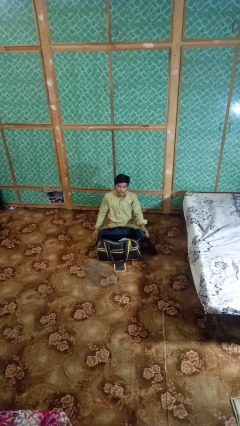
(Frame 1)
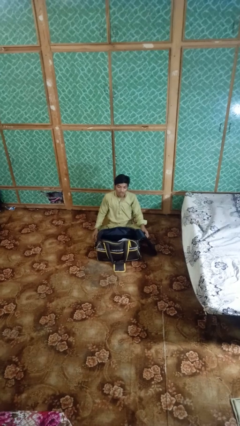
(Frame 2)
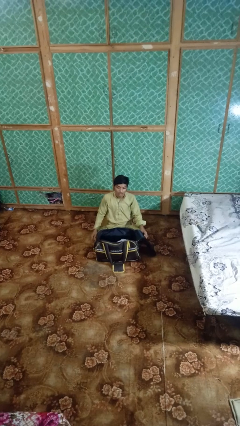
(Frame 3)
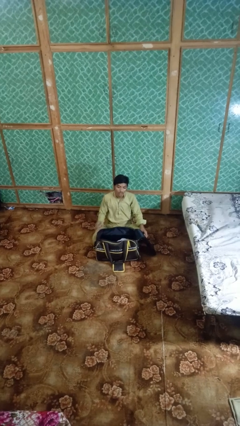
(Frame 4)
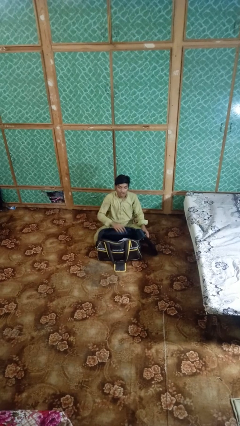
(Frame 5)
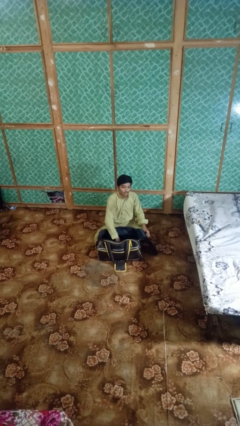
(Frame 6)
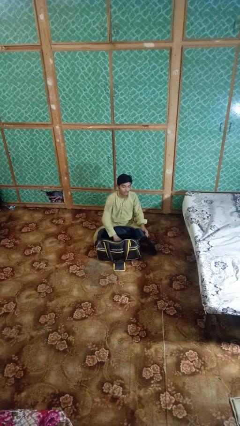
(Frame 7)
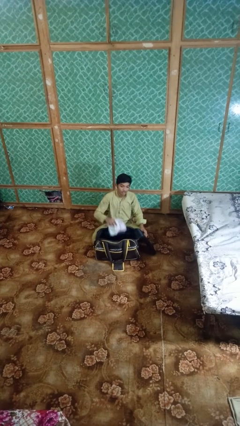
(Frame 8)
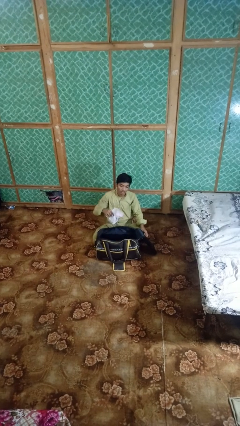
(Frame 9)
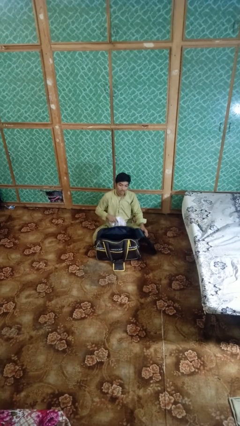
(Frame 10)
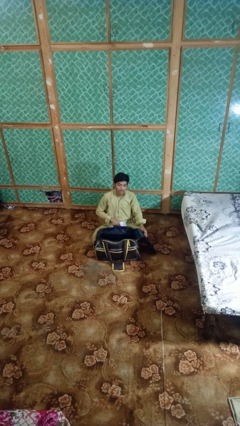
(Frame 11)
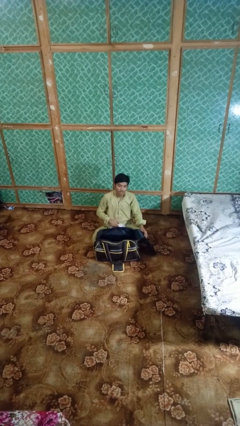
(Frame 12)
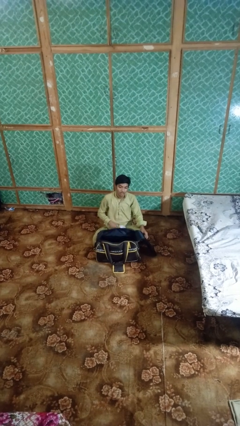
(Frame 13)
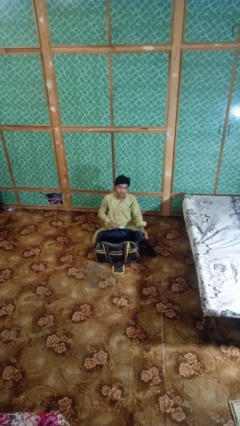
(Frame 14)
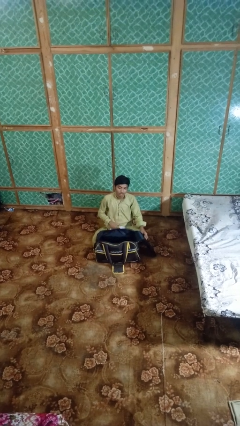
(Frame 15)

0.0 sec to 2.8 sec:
person takes object from bag

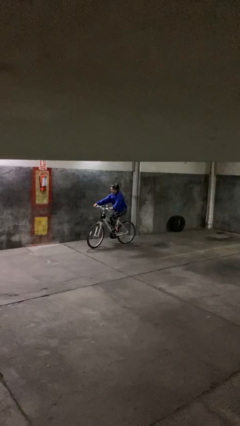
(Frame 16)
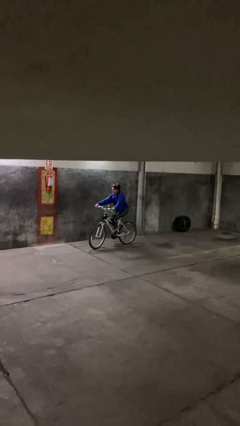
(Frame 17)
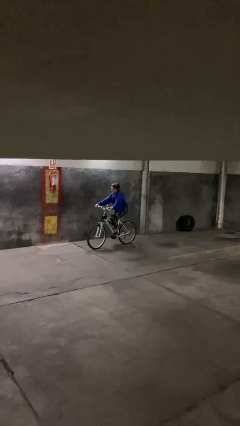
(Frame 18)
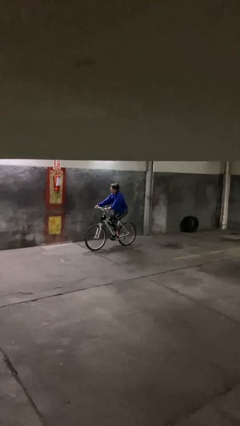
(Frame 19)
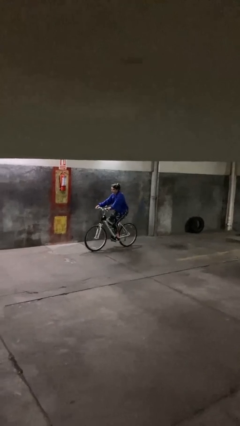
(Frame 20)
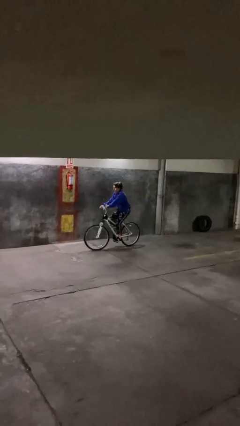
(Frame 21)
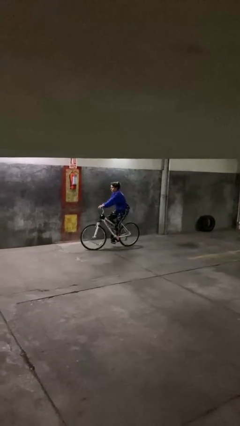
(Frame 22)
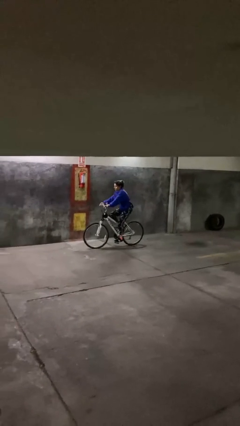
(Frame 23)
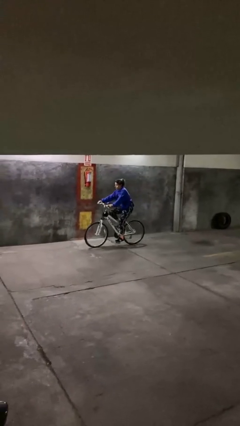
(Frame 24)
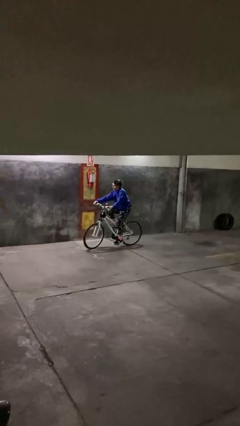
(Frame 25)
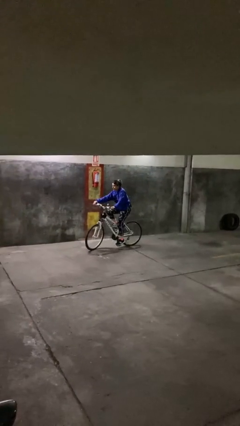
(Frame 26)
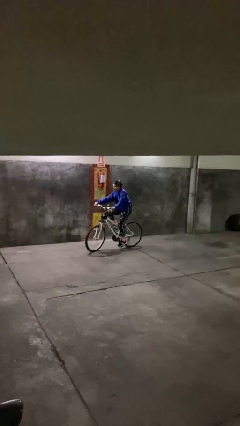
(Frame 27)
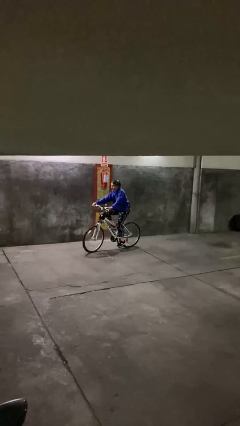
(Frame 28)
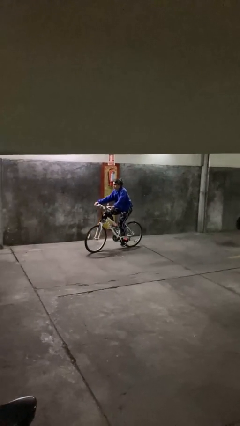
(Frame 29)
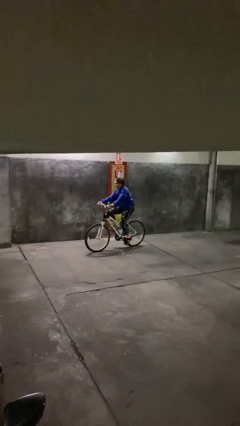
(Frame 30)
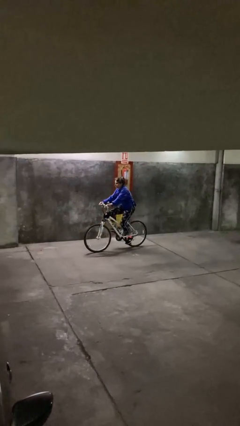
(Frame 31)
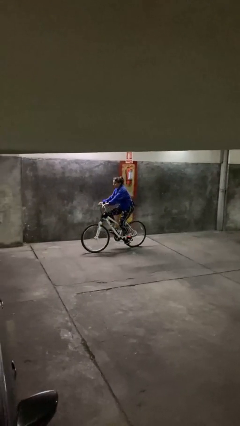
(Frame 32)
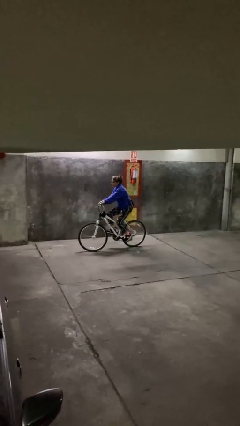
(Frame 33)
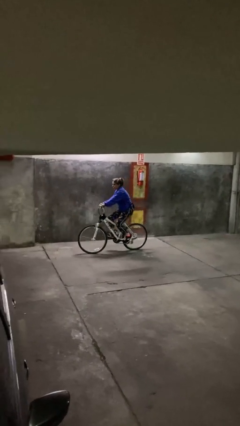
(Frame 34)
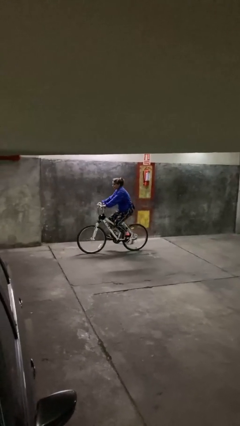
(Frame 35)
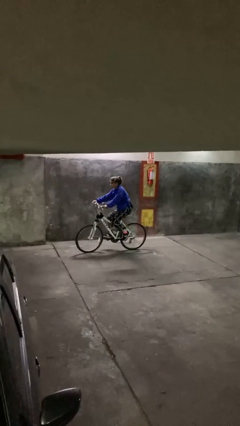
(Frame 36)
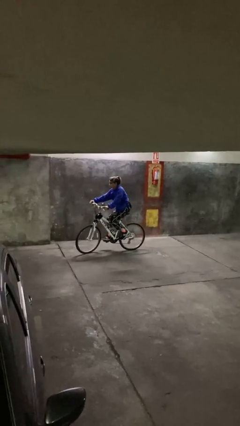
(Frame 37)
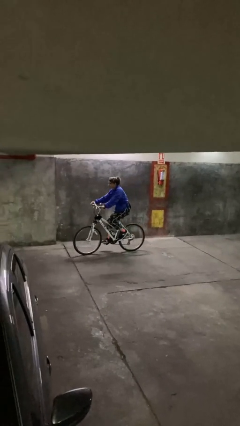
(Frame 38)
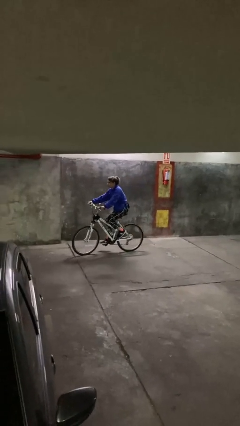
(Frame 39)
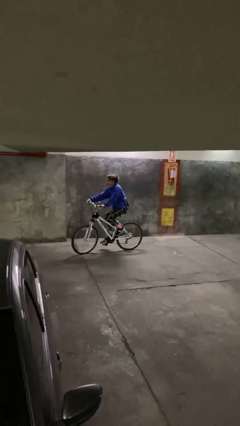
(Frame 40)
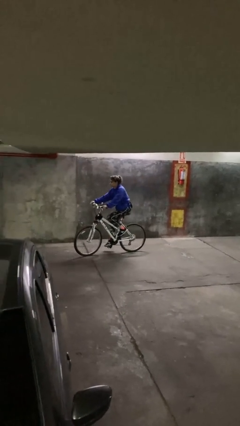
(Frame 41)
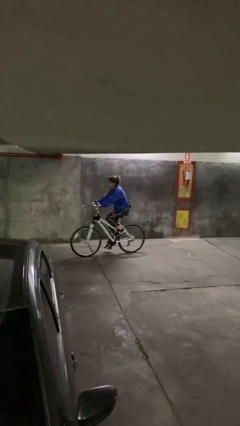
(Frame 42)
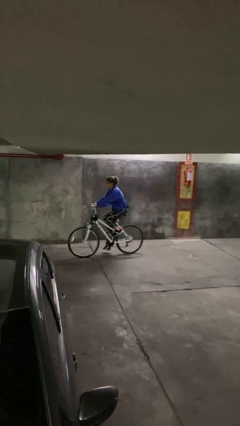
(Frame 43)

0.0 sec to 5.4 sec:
person rides bicycle

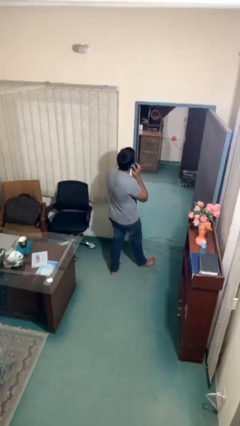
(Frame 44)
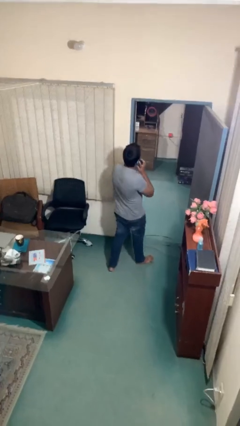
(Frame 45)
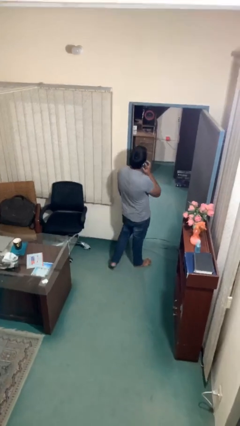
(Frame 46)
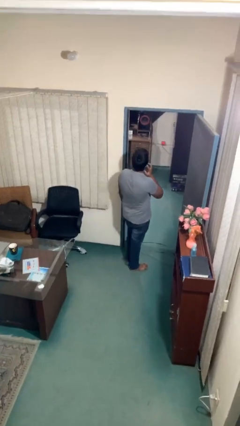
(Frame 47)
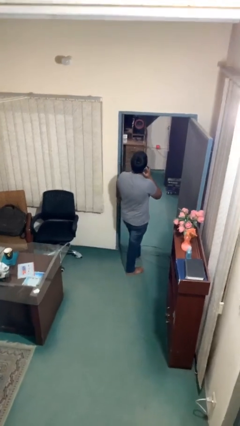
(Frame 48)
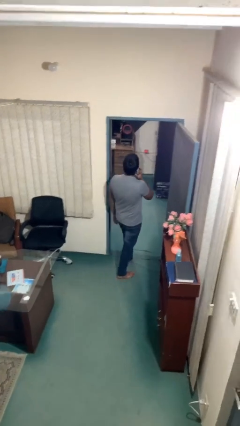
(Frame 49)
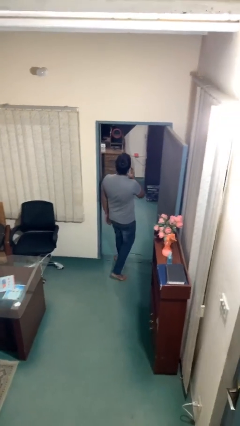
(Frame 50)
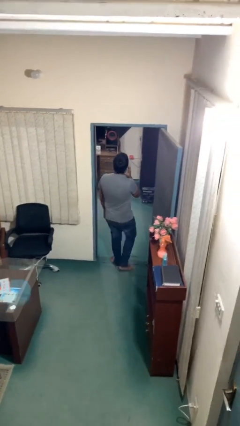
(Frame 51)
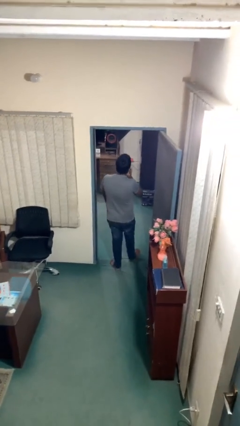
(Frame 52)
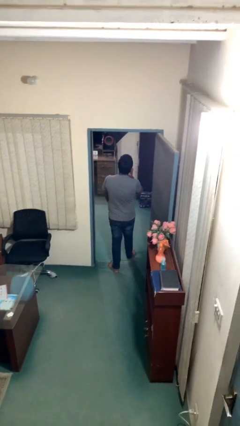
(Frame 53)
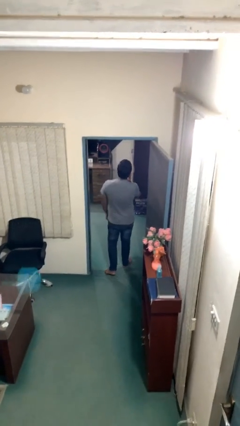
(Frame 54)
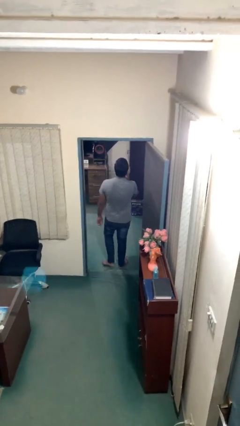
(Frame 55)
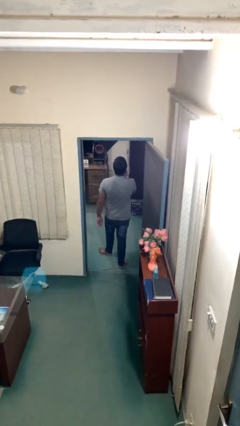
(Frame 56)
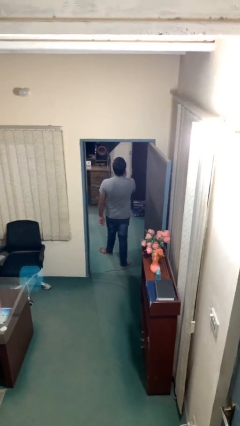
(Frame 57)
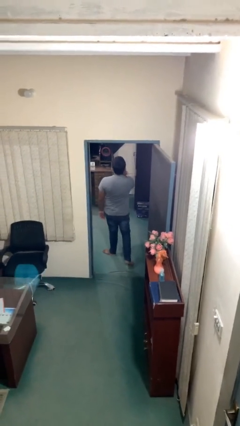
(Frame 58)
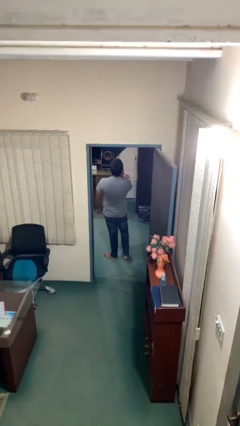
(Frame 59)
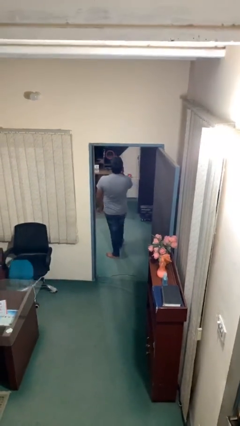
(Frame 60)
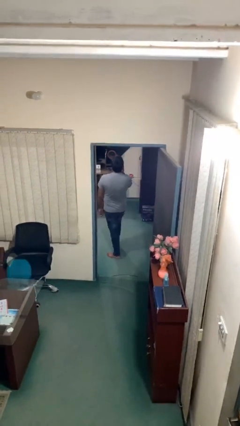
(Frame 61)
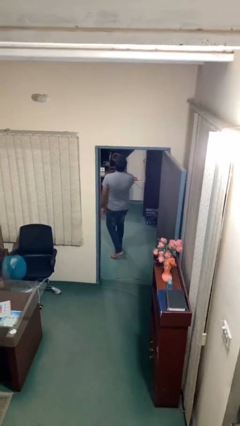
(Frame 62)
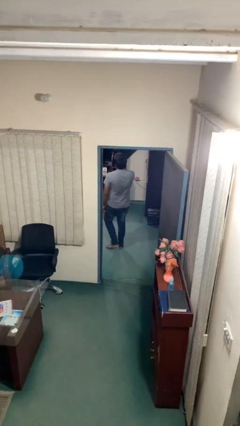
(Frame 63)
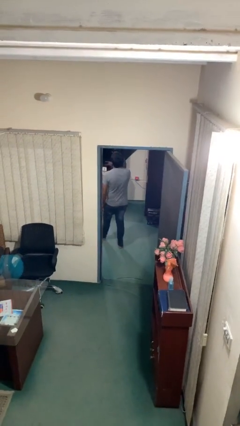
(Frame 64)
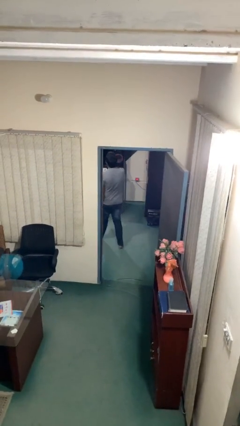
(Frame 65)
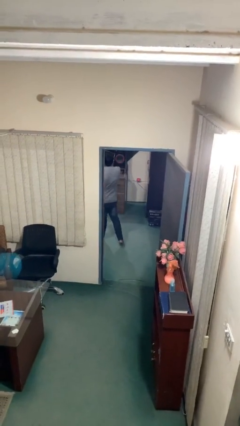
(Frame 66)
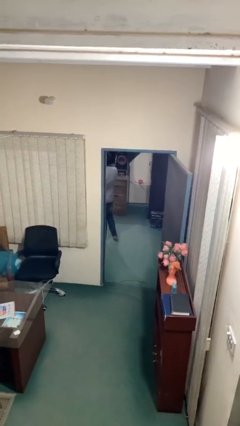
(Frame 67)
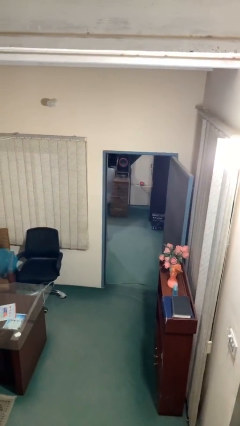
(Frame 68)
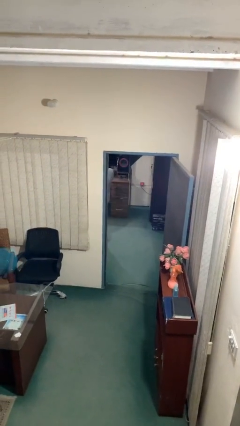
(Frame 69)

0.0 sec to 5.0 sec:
person exits scene through structure

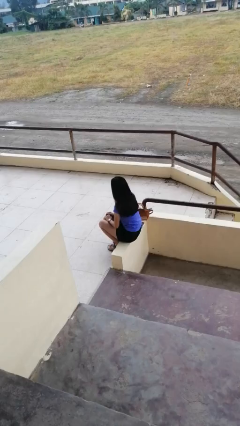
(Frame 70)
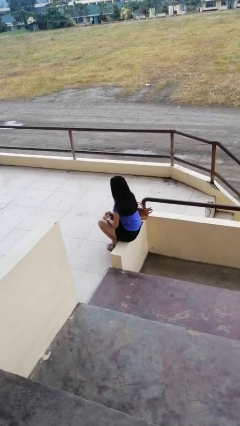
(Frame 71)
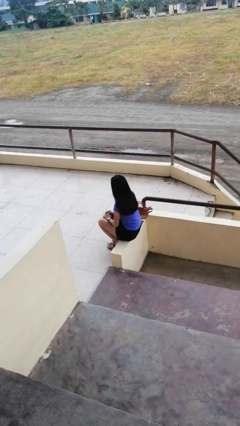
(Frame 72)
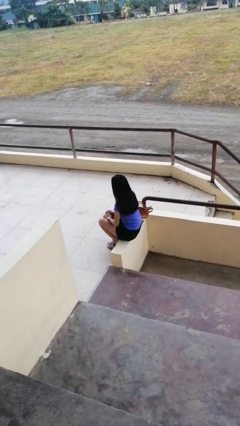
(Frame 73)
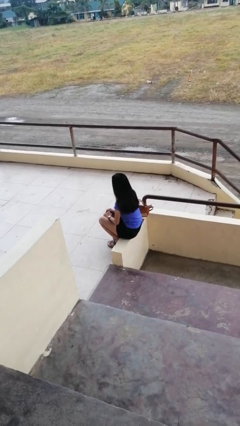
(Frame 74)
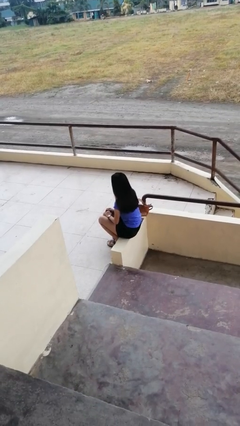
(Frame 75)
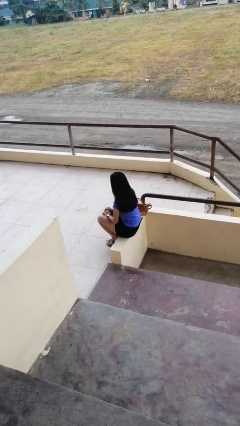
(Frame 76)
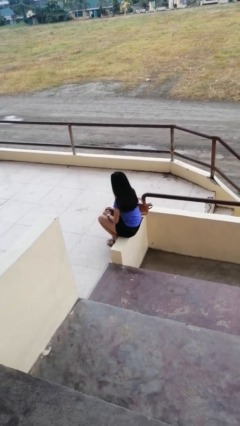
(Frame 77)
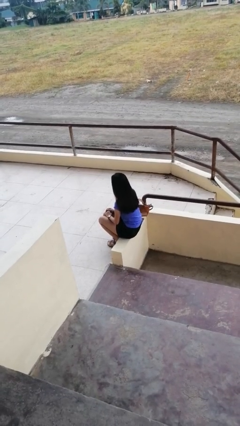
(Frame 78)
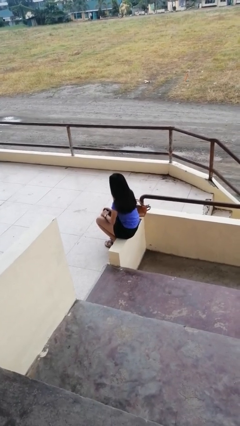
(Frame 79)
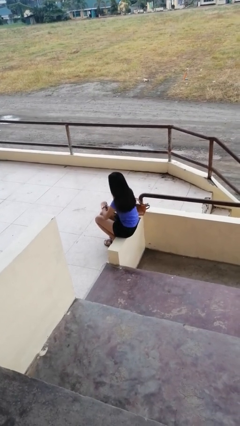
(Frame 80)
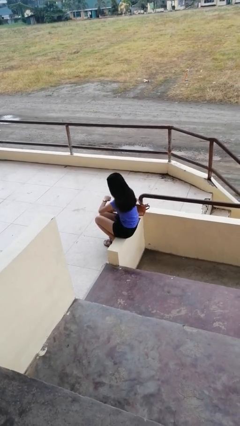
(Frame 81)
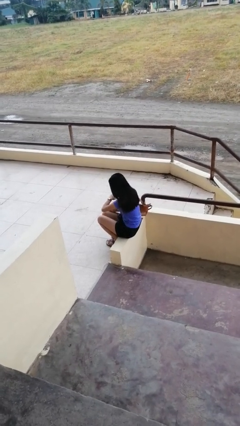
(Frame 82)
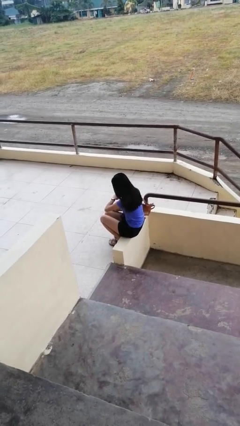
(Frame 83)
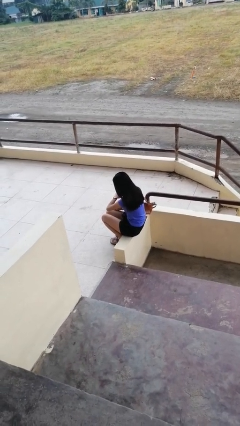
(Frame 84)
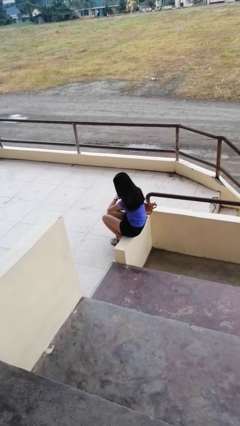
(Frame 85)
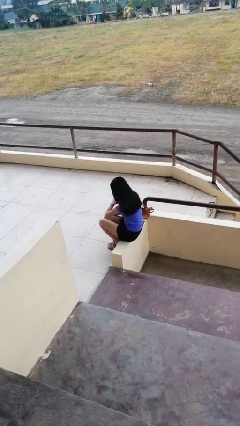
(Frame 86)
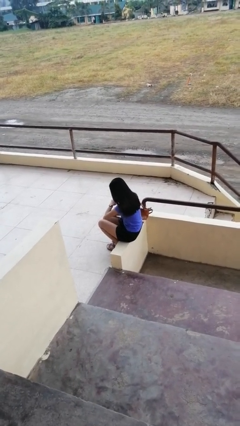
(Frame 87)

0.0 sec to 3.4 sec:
person looks at wristwatch

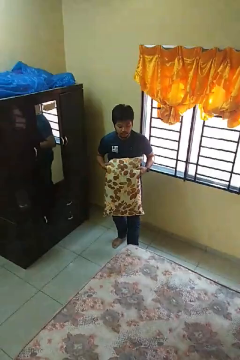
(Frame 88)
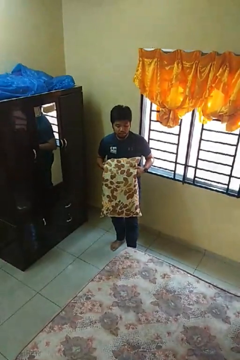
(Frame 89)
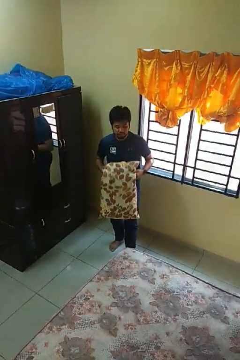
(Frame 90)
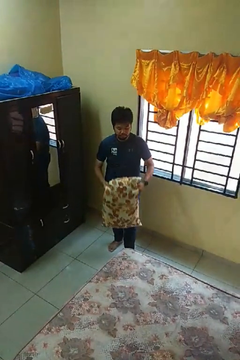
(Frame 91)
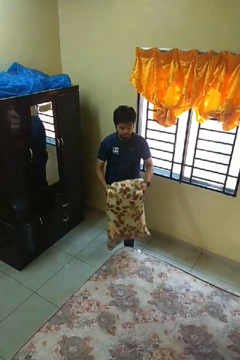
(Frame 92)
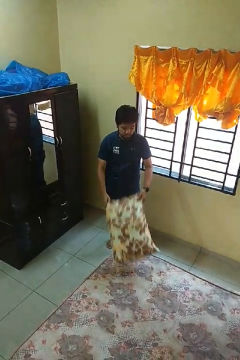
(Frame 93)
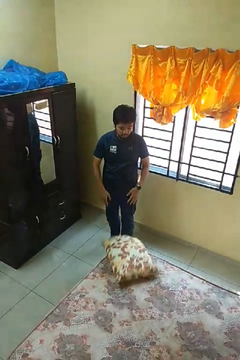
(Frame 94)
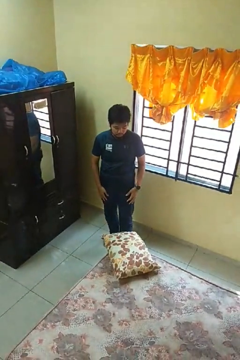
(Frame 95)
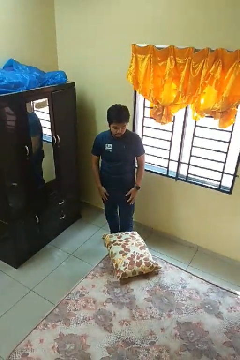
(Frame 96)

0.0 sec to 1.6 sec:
person puts down object on bed
